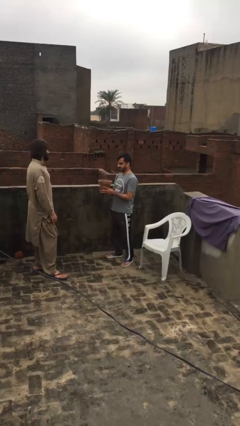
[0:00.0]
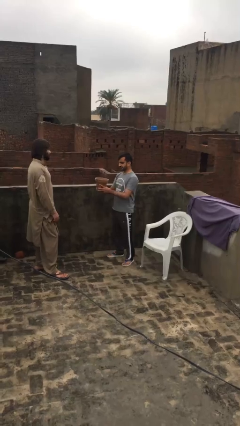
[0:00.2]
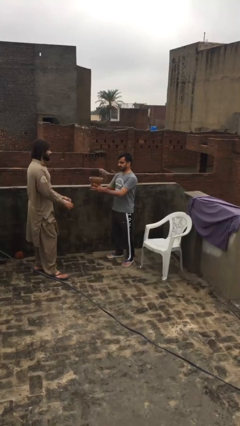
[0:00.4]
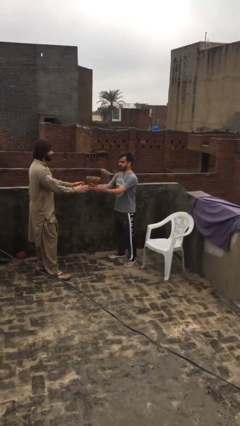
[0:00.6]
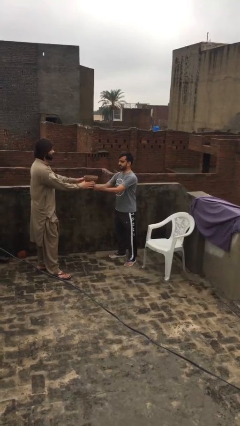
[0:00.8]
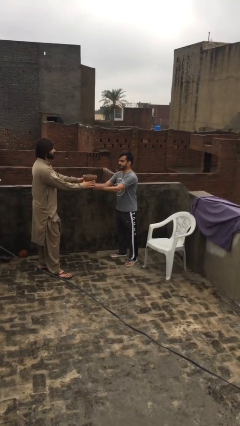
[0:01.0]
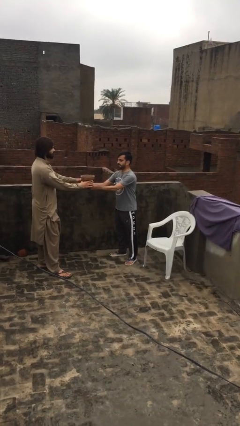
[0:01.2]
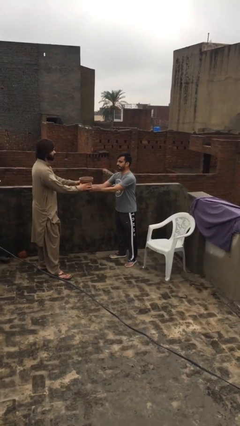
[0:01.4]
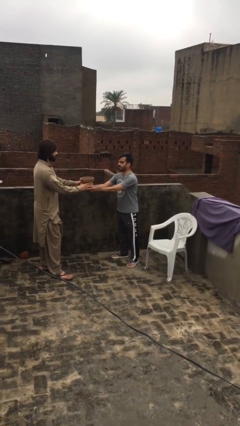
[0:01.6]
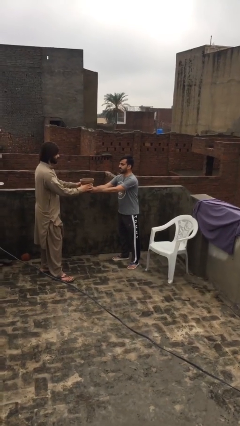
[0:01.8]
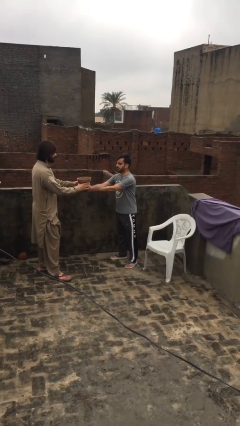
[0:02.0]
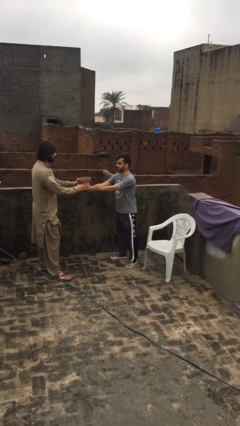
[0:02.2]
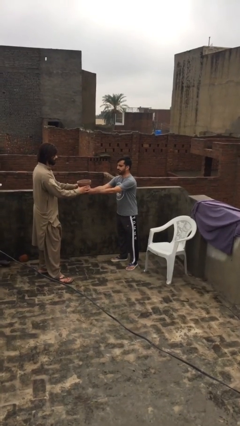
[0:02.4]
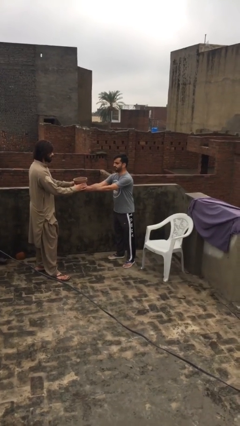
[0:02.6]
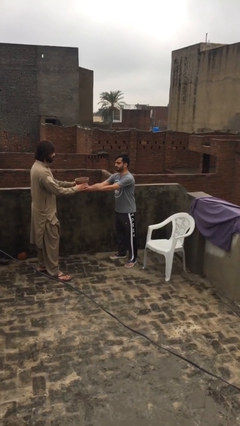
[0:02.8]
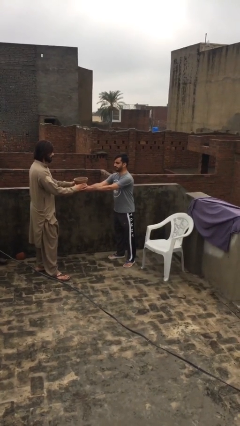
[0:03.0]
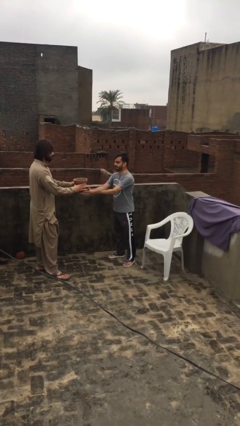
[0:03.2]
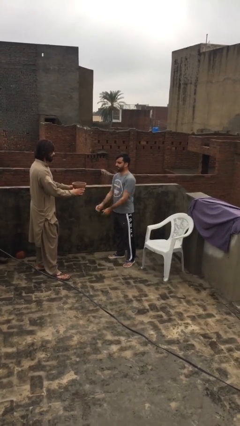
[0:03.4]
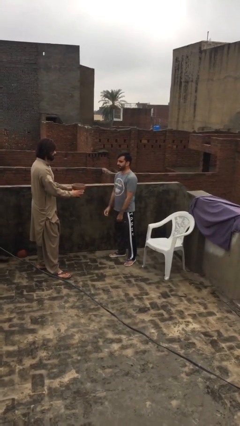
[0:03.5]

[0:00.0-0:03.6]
person transfers object to person

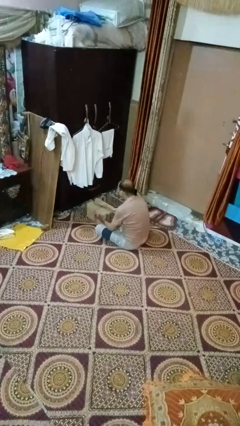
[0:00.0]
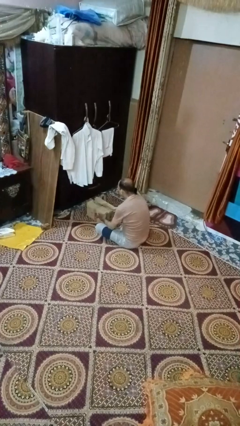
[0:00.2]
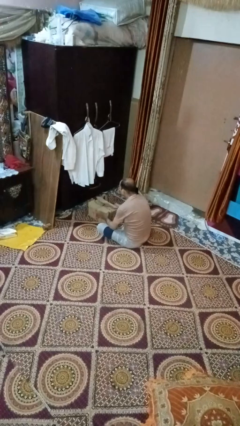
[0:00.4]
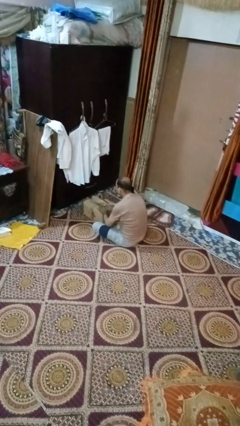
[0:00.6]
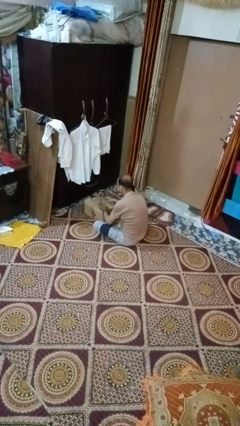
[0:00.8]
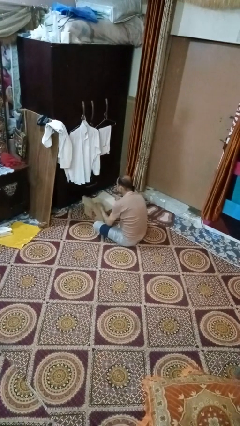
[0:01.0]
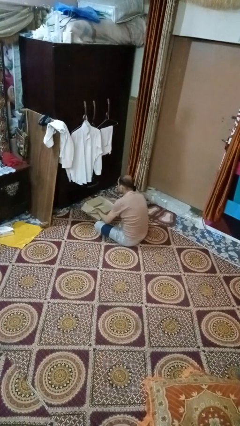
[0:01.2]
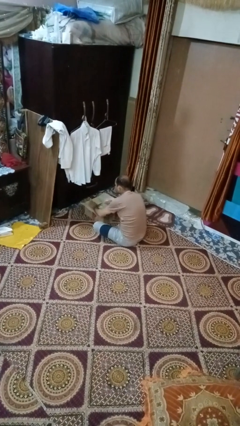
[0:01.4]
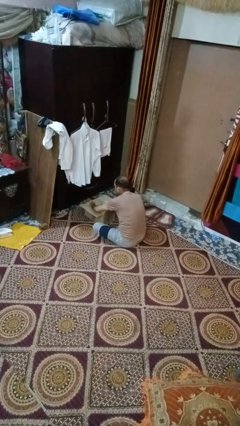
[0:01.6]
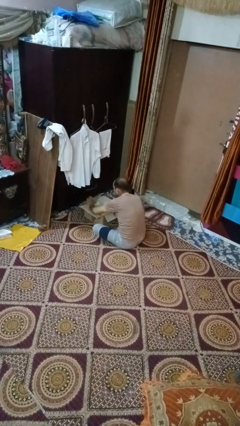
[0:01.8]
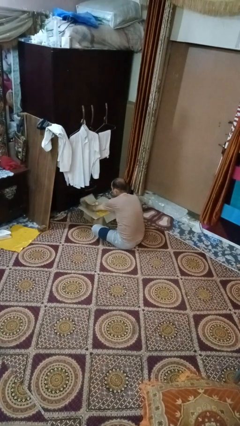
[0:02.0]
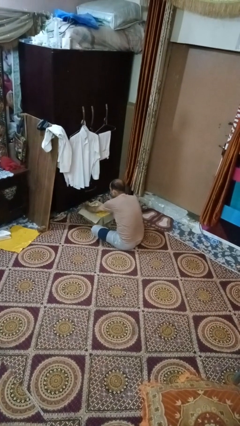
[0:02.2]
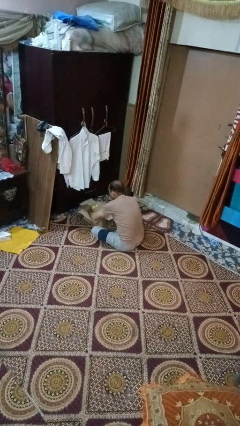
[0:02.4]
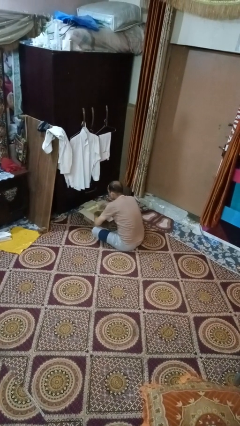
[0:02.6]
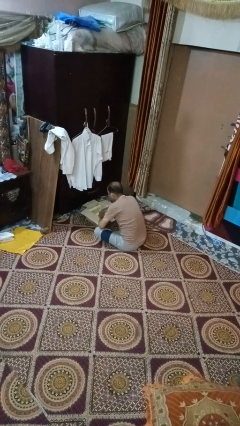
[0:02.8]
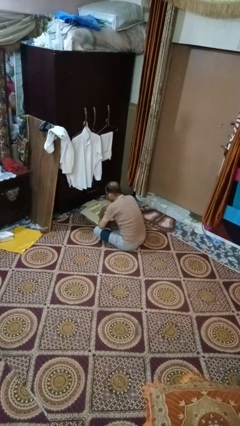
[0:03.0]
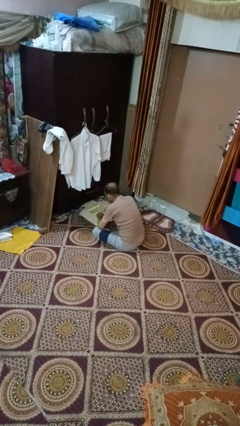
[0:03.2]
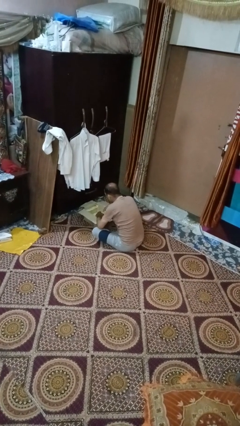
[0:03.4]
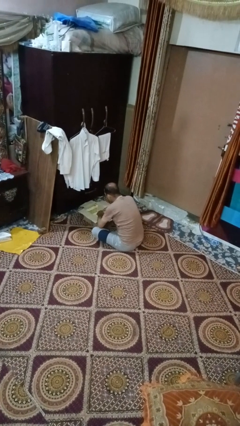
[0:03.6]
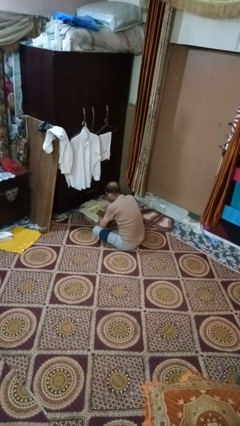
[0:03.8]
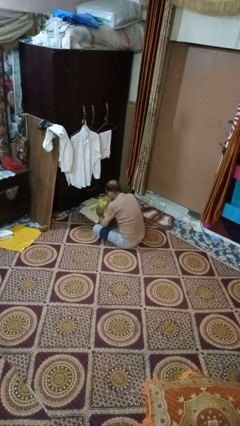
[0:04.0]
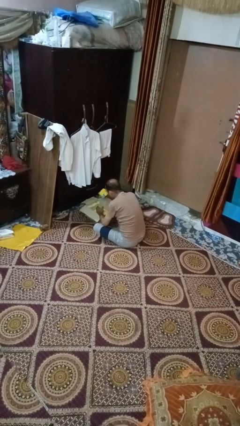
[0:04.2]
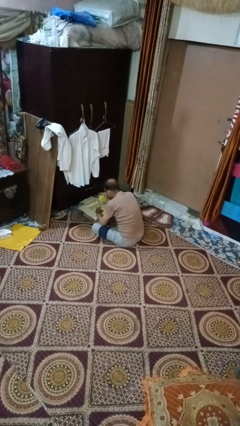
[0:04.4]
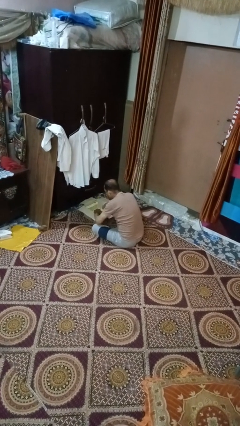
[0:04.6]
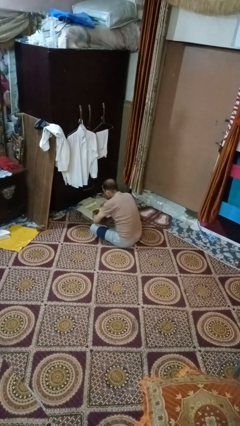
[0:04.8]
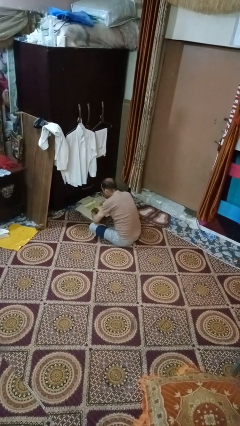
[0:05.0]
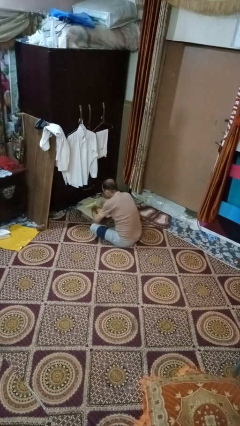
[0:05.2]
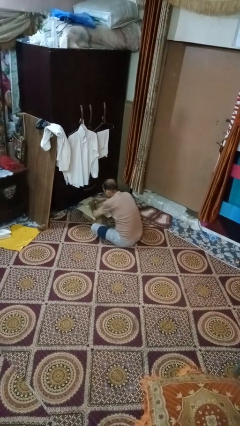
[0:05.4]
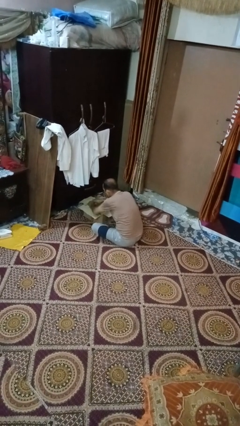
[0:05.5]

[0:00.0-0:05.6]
person searches in box

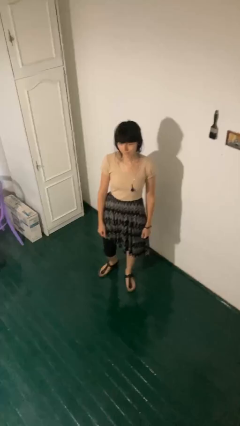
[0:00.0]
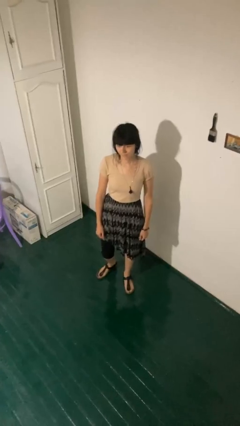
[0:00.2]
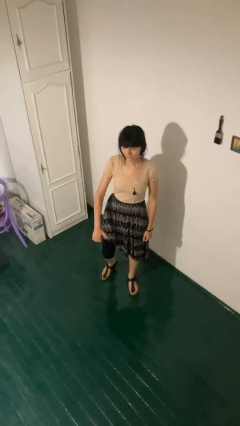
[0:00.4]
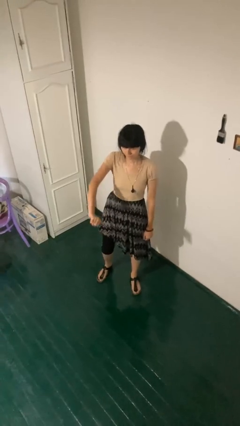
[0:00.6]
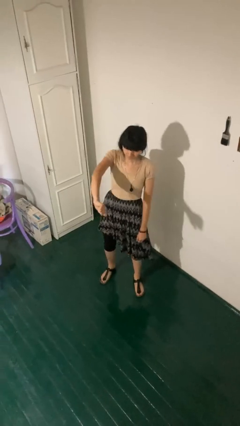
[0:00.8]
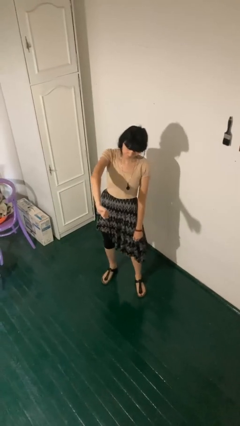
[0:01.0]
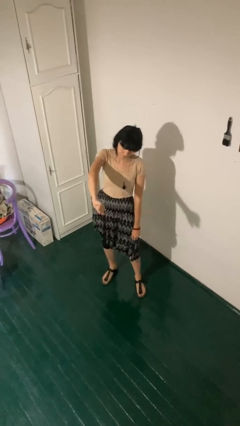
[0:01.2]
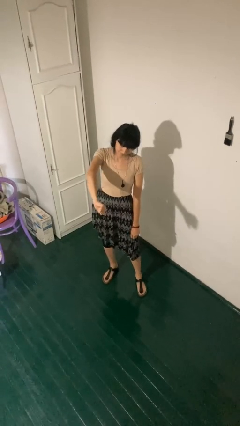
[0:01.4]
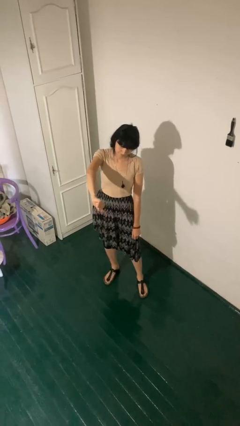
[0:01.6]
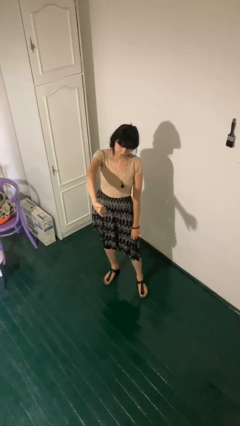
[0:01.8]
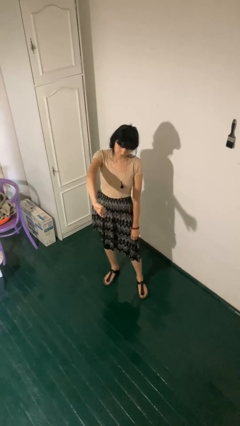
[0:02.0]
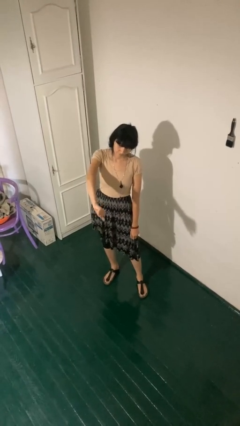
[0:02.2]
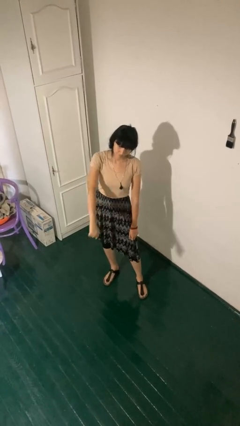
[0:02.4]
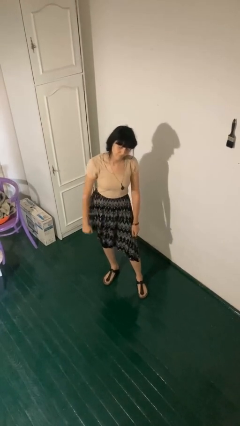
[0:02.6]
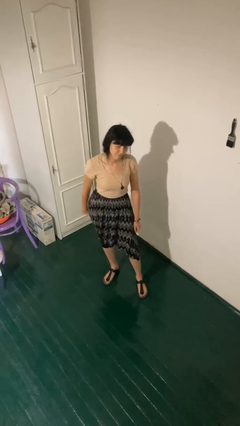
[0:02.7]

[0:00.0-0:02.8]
person gestures thumbs down

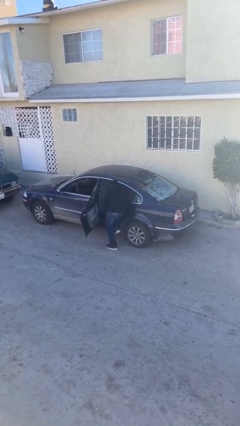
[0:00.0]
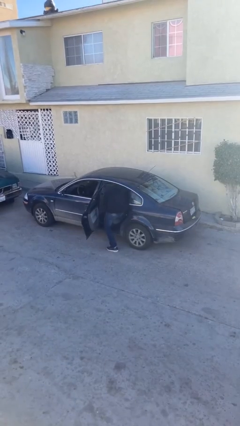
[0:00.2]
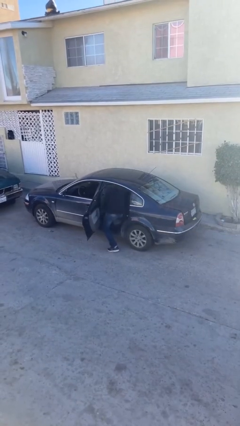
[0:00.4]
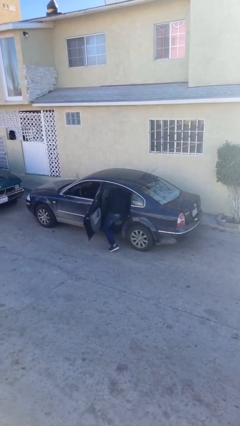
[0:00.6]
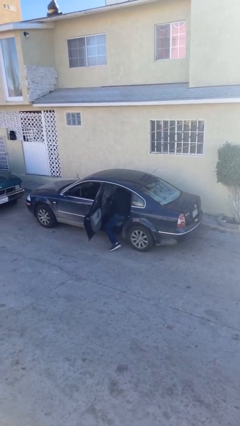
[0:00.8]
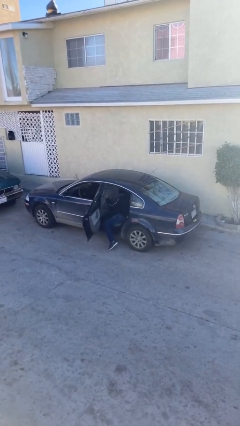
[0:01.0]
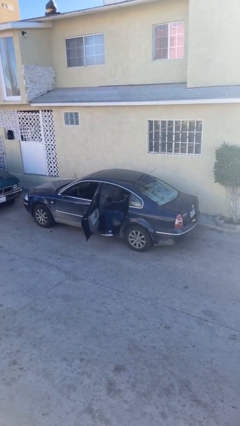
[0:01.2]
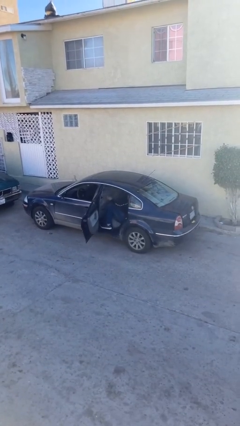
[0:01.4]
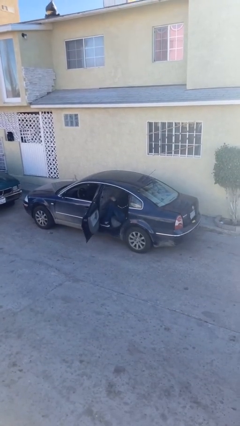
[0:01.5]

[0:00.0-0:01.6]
person enters car

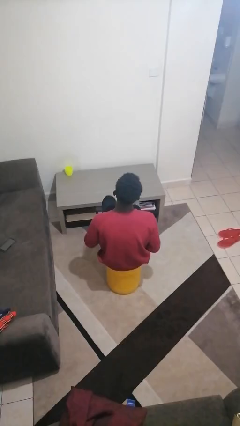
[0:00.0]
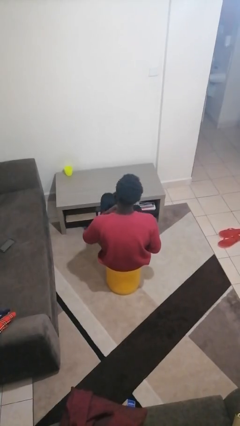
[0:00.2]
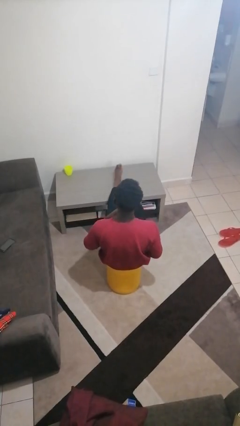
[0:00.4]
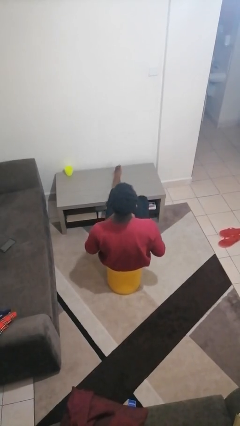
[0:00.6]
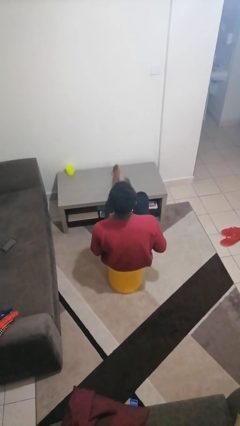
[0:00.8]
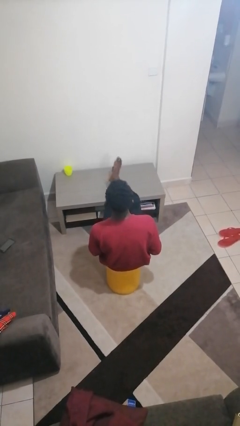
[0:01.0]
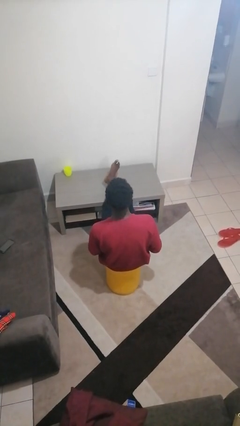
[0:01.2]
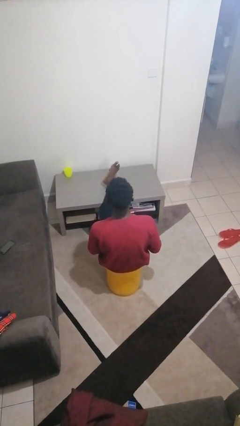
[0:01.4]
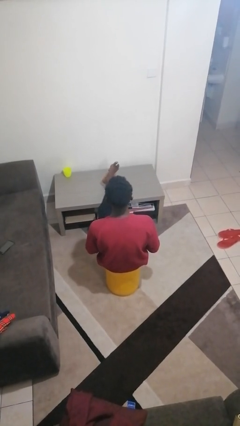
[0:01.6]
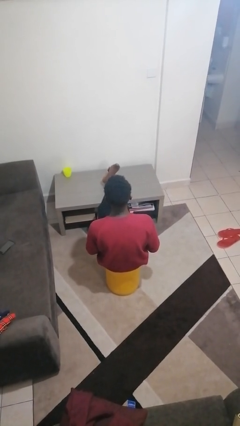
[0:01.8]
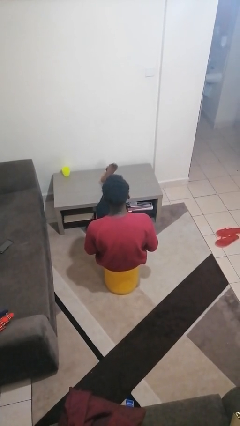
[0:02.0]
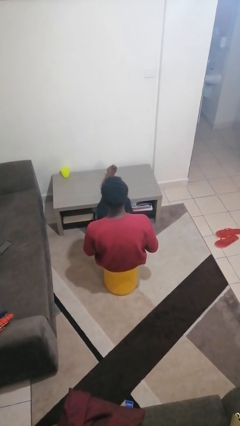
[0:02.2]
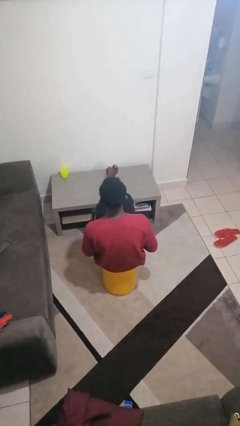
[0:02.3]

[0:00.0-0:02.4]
person puts feet up

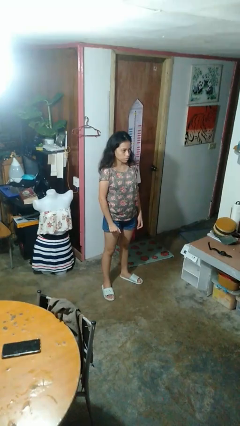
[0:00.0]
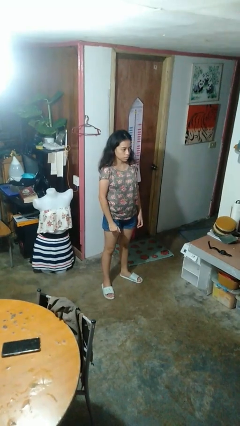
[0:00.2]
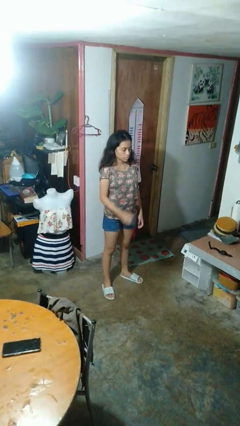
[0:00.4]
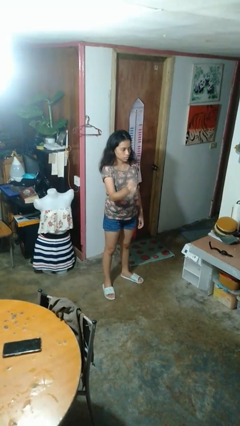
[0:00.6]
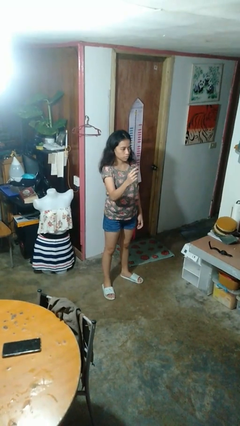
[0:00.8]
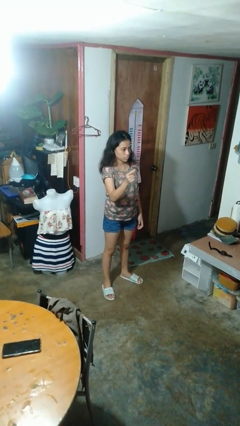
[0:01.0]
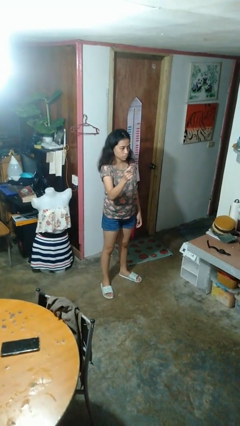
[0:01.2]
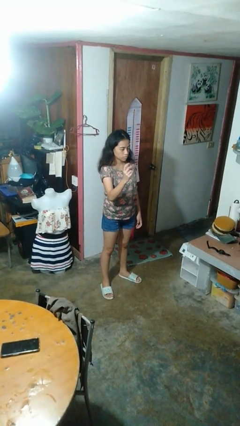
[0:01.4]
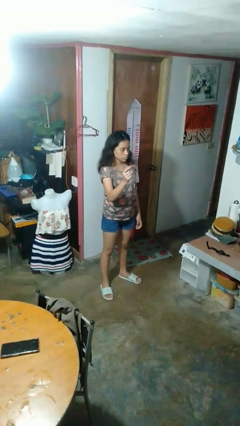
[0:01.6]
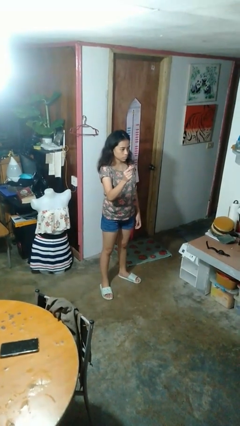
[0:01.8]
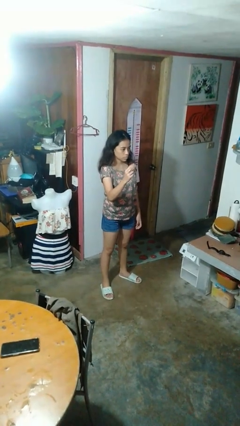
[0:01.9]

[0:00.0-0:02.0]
person snaps fingers
